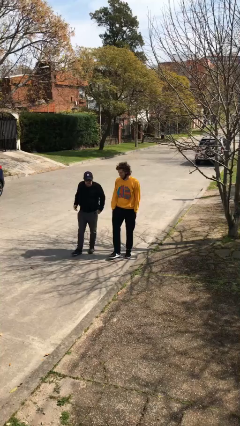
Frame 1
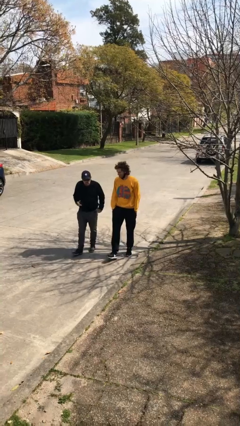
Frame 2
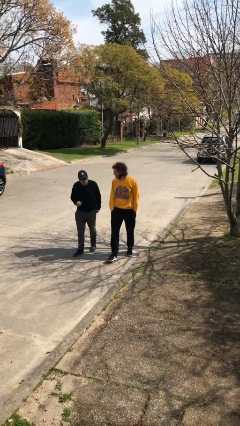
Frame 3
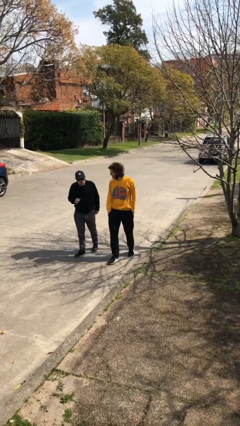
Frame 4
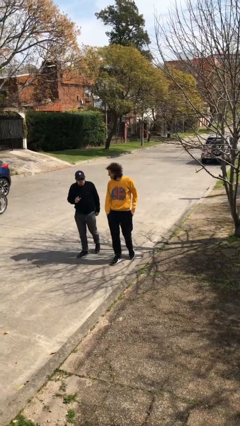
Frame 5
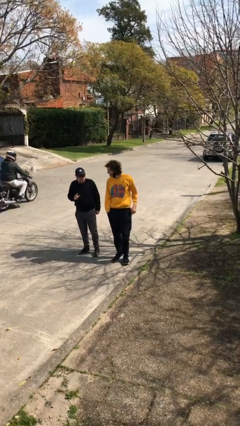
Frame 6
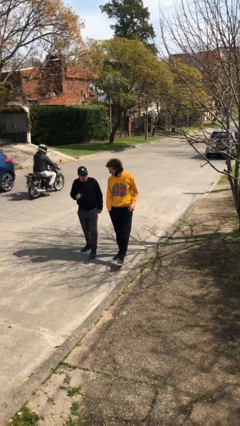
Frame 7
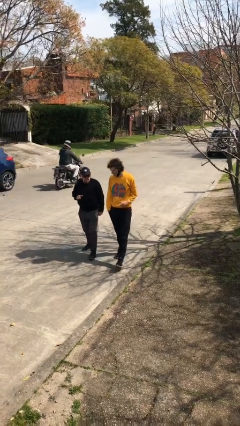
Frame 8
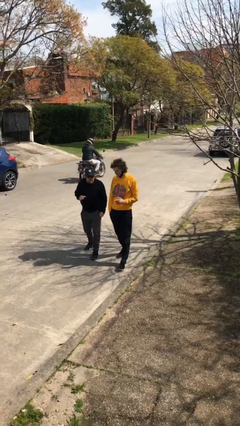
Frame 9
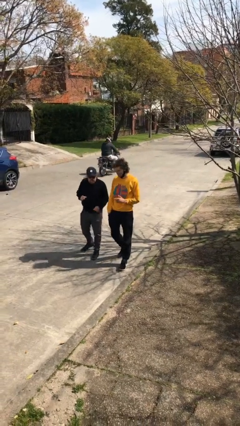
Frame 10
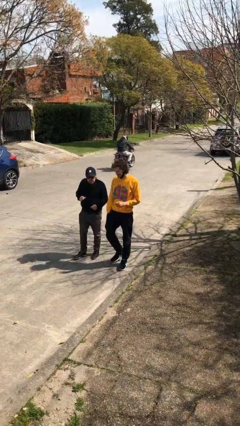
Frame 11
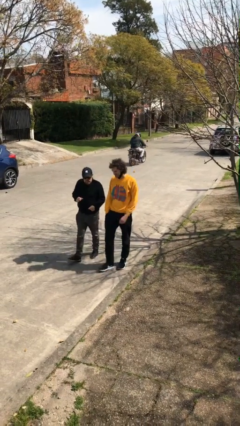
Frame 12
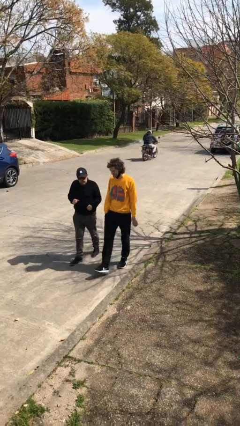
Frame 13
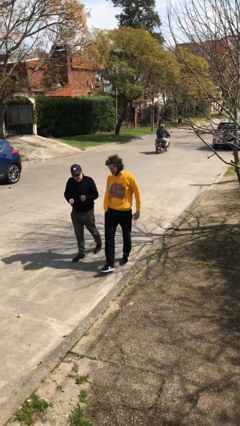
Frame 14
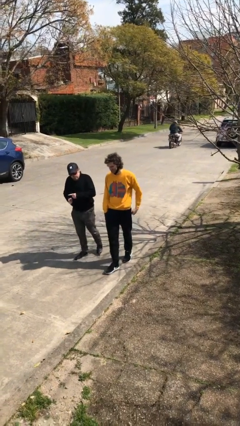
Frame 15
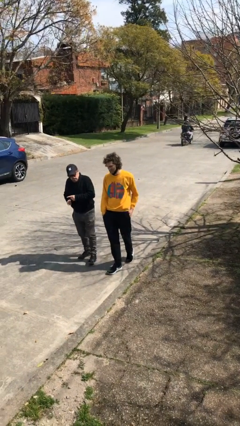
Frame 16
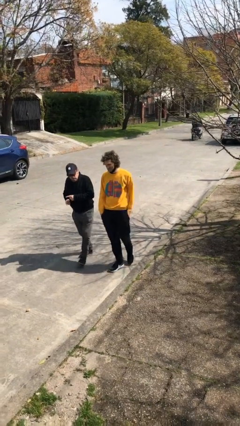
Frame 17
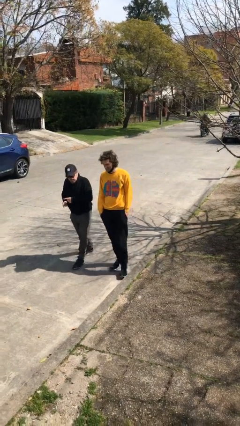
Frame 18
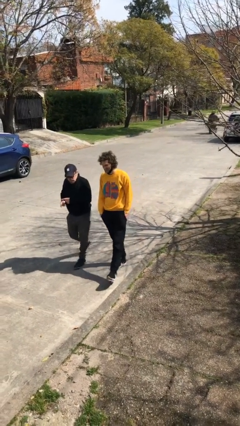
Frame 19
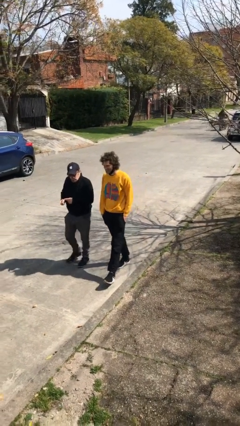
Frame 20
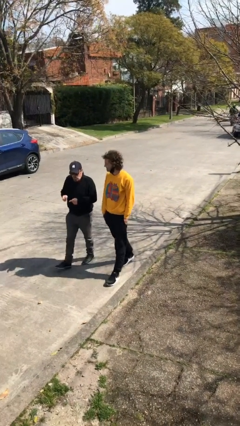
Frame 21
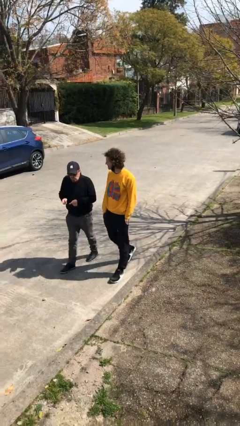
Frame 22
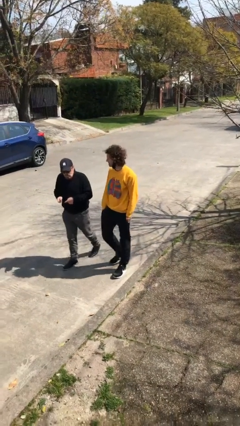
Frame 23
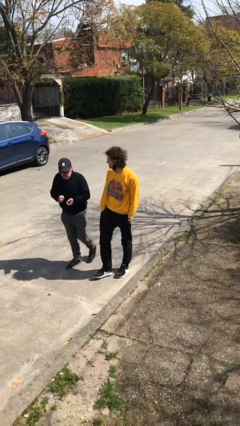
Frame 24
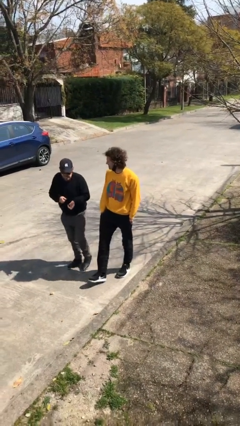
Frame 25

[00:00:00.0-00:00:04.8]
person talks to person

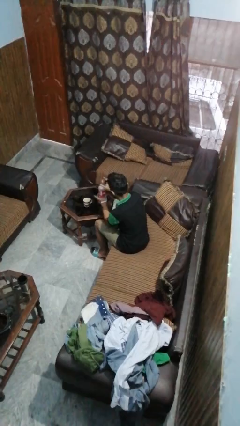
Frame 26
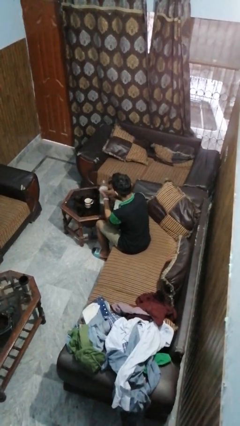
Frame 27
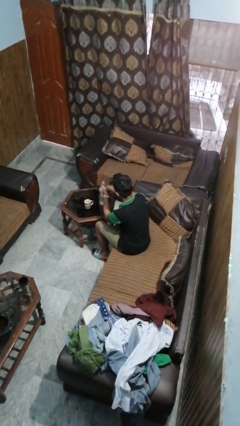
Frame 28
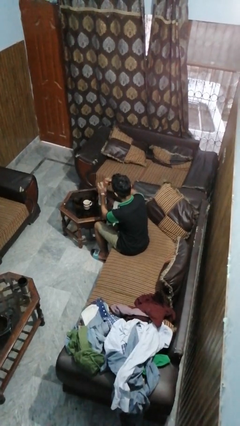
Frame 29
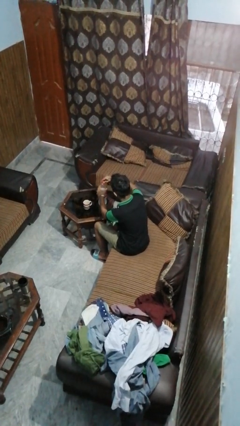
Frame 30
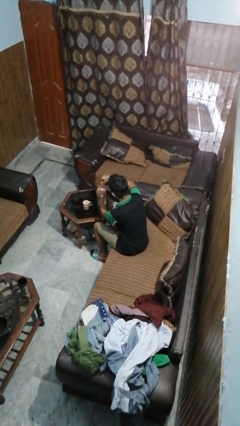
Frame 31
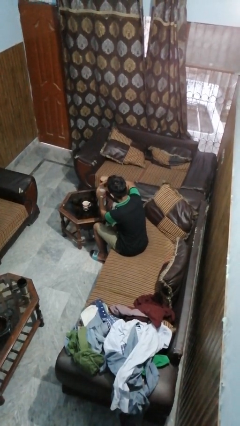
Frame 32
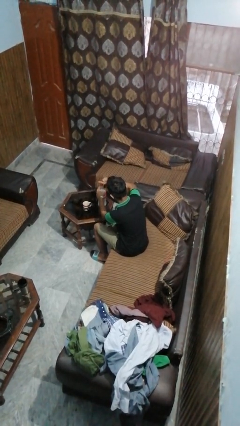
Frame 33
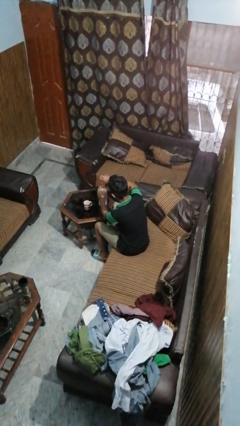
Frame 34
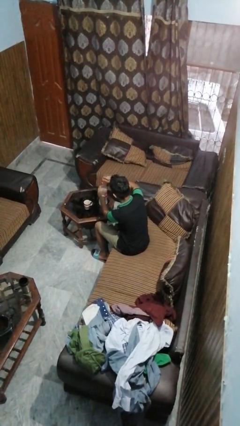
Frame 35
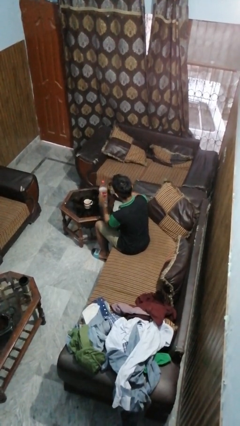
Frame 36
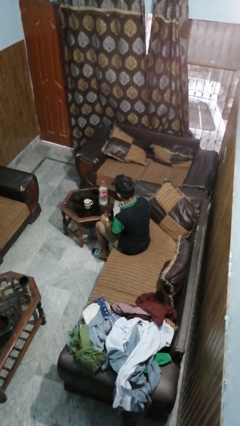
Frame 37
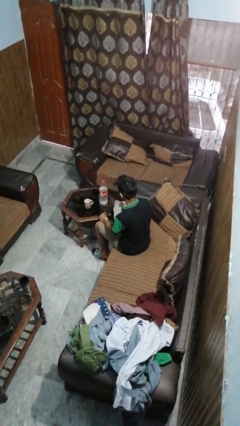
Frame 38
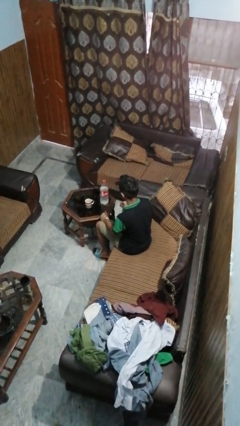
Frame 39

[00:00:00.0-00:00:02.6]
person screws lid to bottle

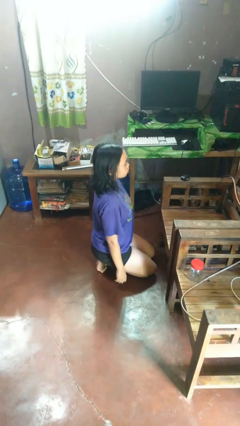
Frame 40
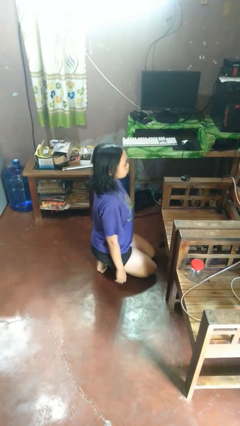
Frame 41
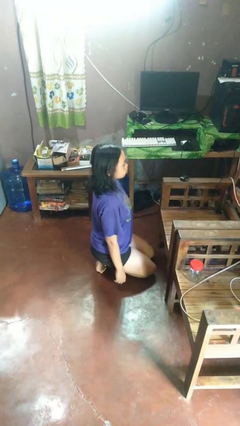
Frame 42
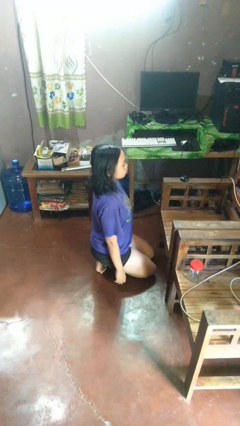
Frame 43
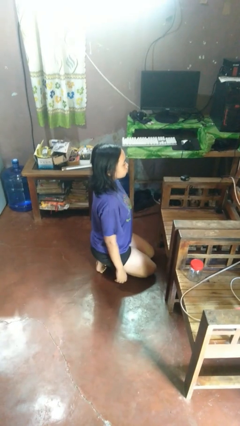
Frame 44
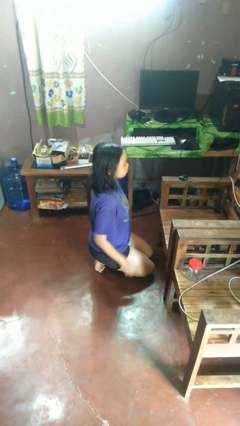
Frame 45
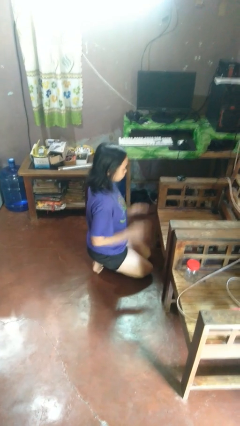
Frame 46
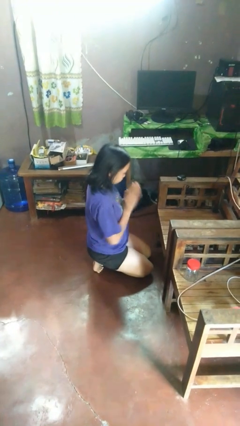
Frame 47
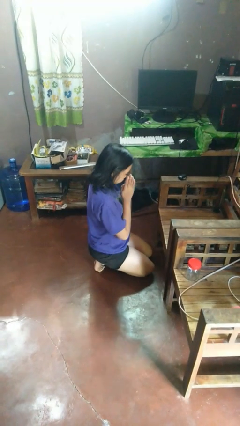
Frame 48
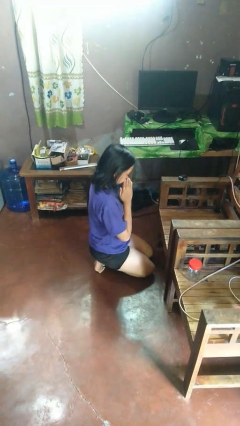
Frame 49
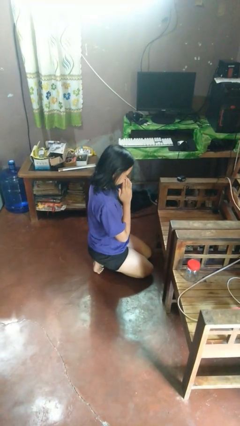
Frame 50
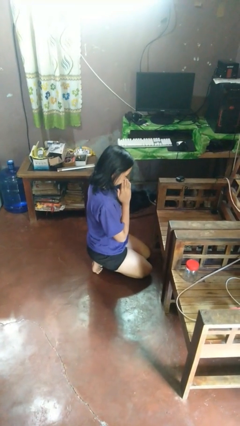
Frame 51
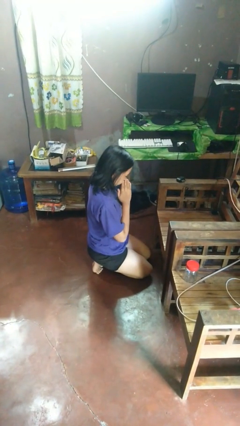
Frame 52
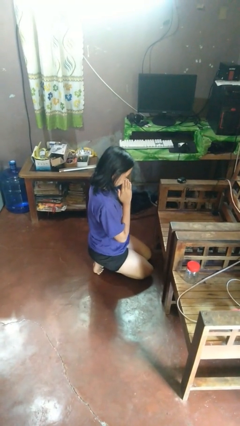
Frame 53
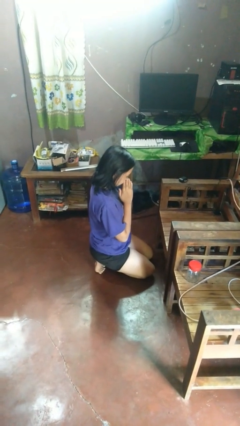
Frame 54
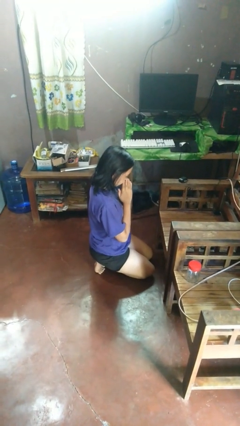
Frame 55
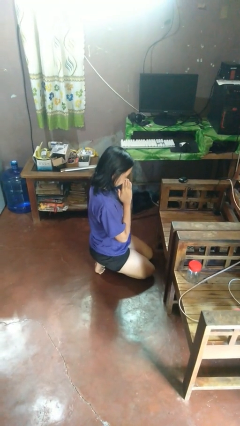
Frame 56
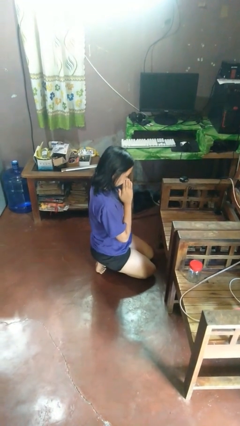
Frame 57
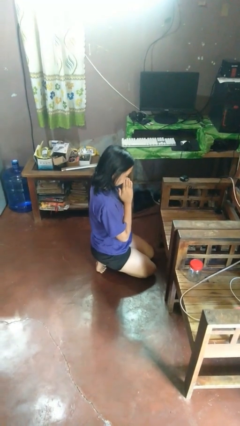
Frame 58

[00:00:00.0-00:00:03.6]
person prays

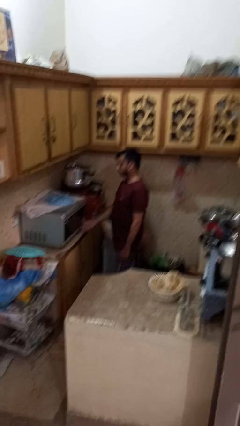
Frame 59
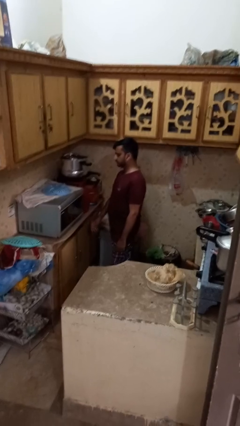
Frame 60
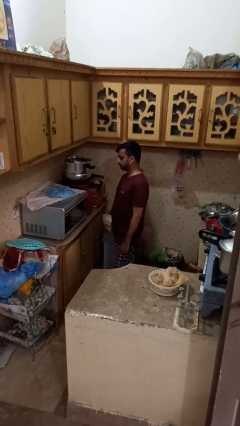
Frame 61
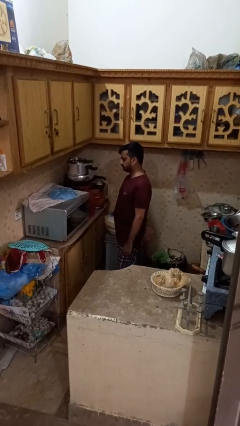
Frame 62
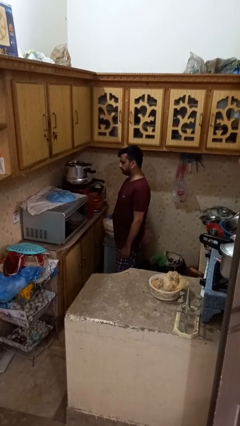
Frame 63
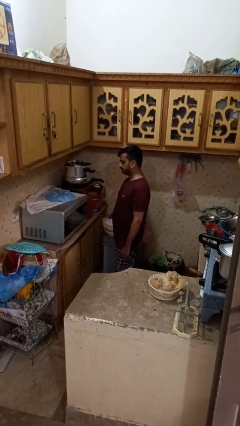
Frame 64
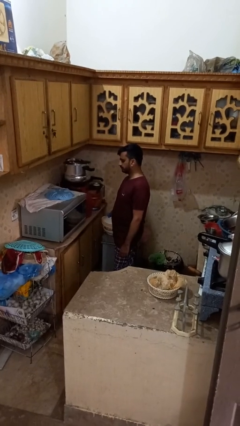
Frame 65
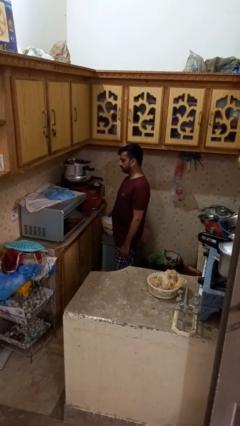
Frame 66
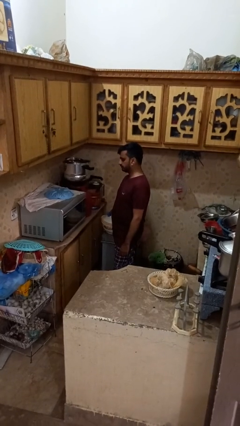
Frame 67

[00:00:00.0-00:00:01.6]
person closes microwave

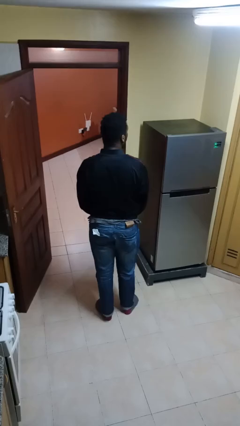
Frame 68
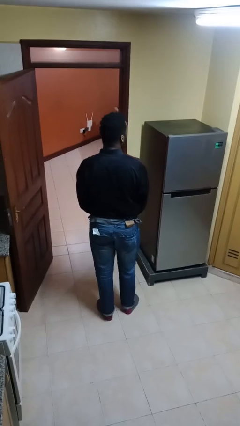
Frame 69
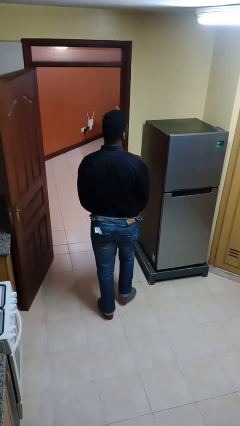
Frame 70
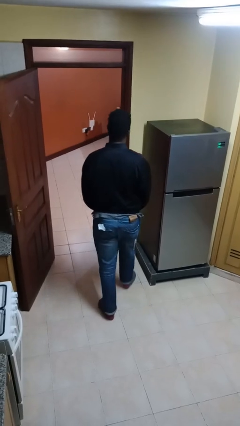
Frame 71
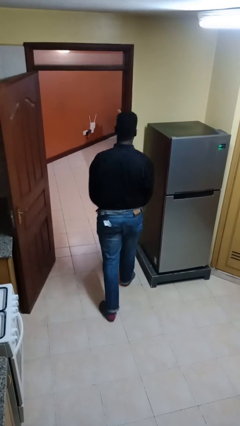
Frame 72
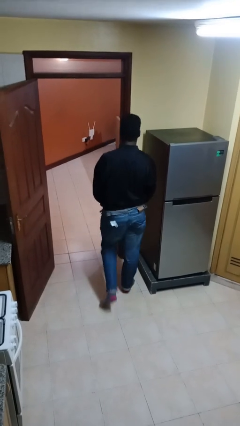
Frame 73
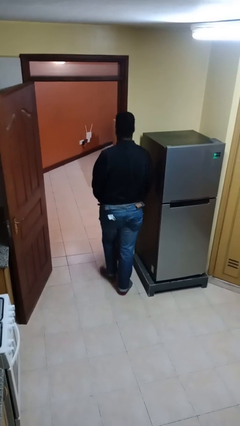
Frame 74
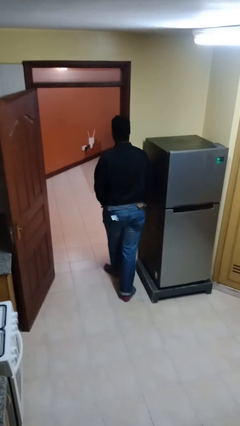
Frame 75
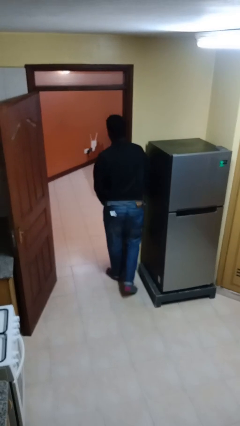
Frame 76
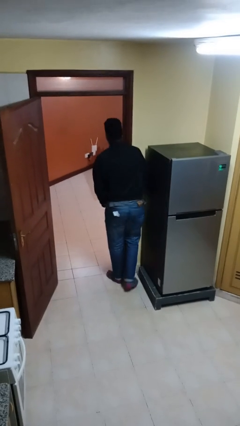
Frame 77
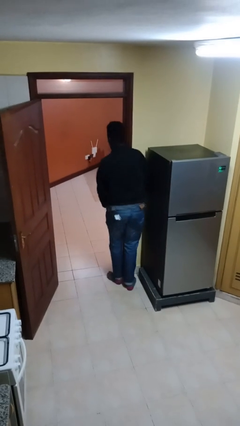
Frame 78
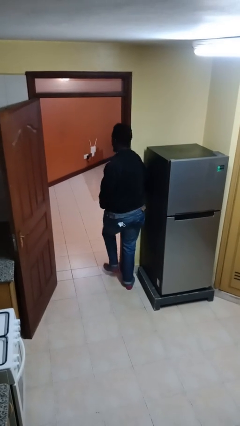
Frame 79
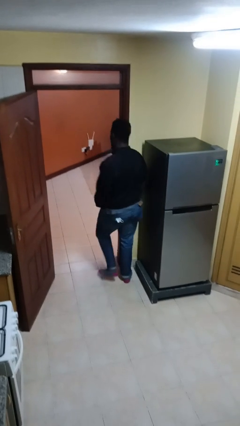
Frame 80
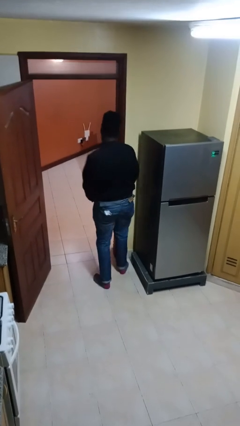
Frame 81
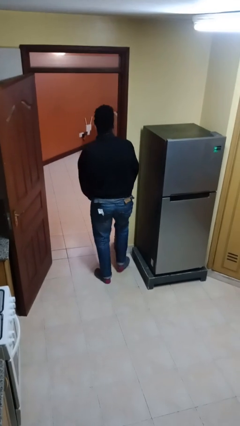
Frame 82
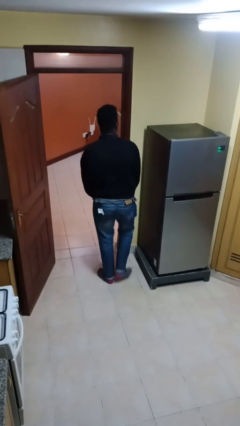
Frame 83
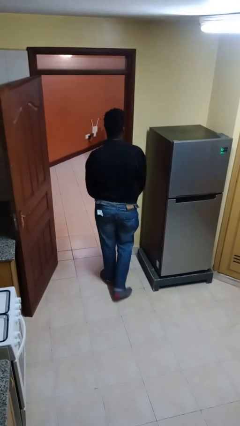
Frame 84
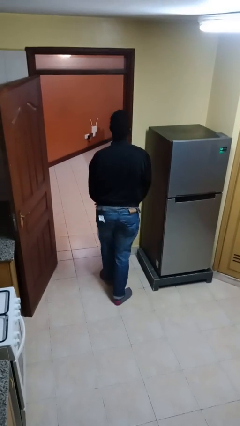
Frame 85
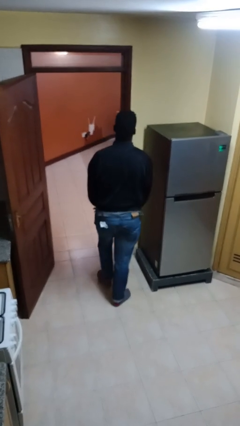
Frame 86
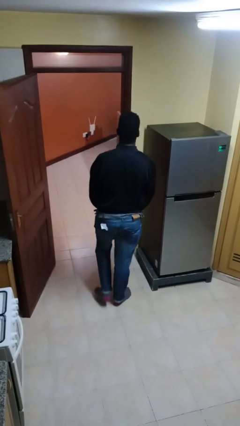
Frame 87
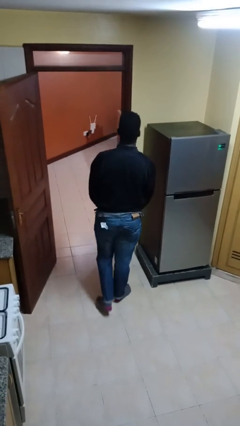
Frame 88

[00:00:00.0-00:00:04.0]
person bumps into wall

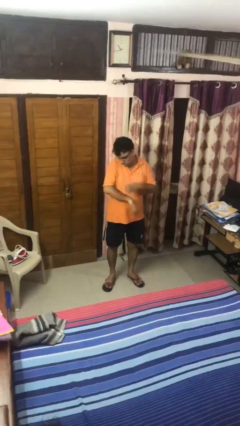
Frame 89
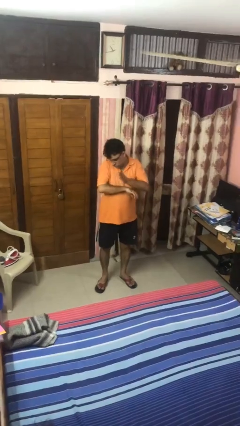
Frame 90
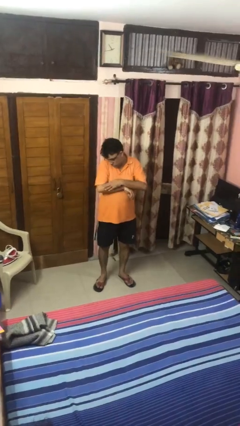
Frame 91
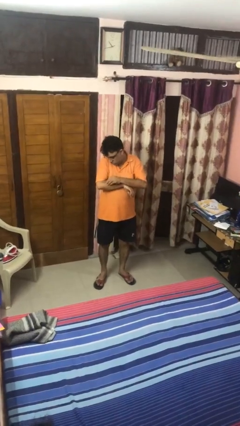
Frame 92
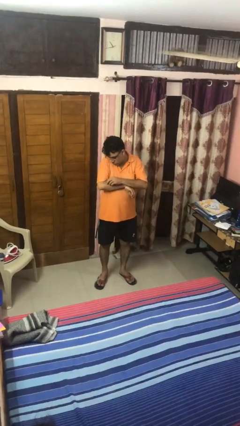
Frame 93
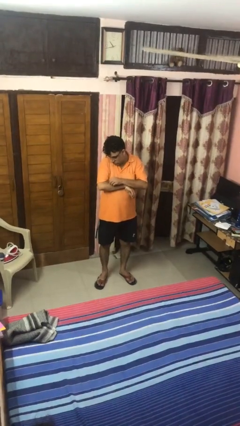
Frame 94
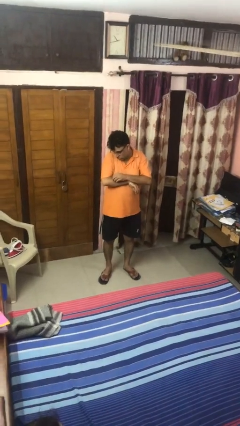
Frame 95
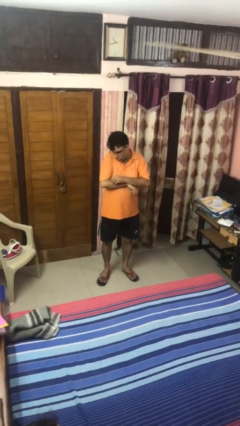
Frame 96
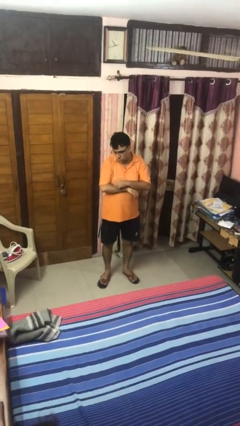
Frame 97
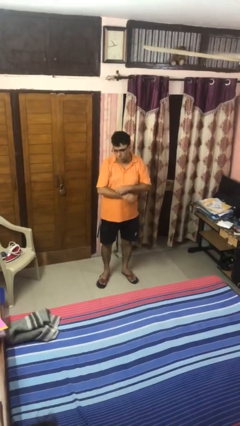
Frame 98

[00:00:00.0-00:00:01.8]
person swats bug
